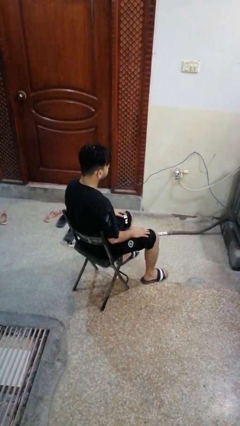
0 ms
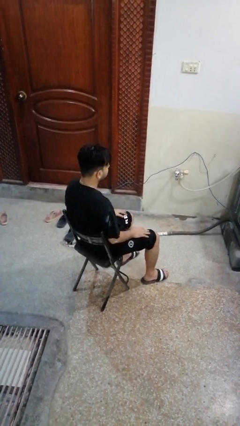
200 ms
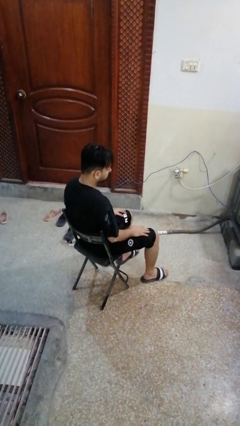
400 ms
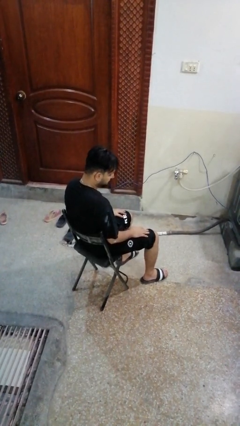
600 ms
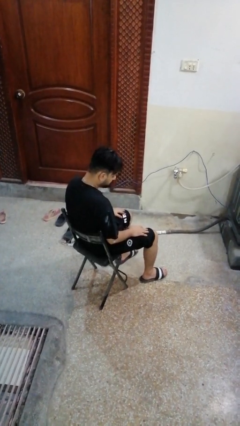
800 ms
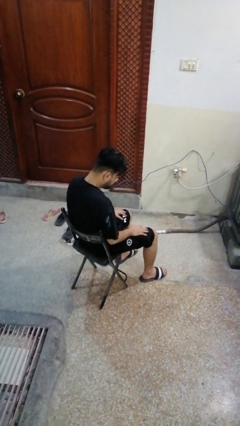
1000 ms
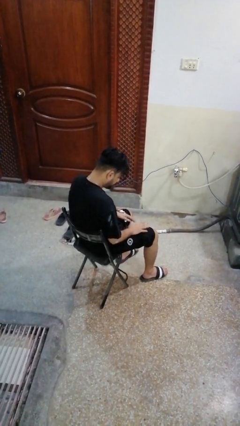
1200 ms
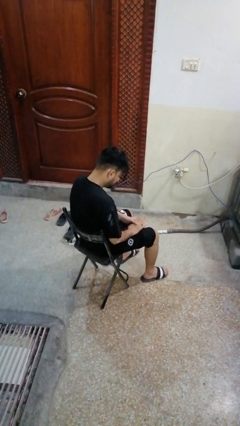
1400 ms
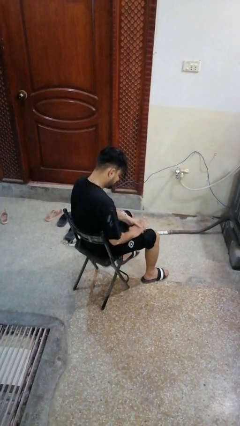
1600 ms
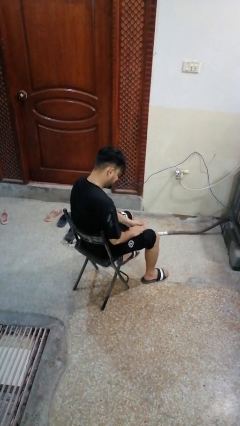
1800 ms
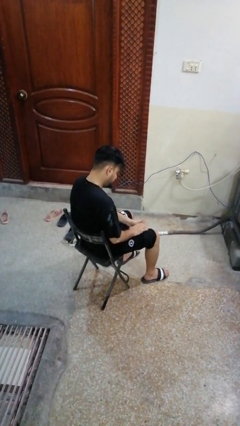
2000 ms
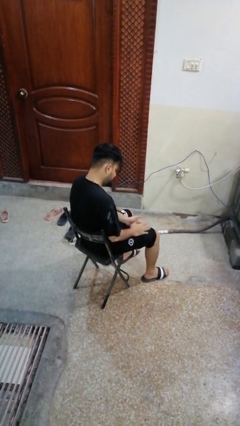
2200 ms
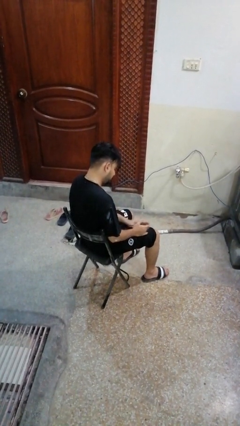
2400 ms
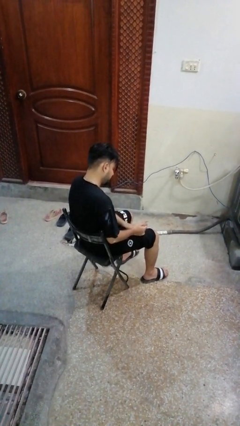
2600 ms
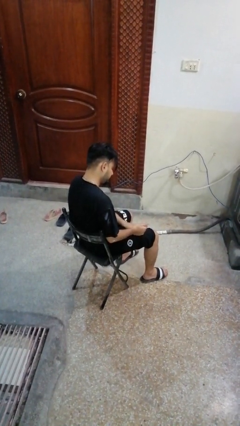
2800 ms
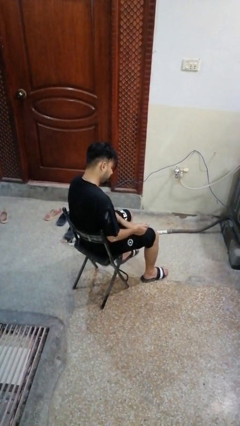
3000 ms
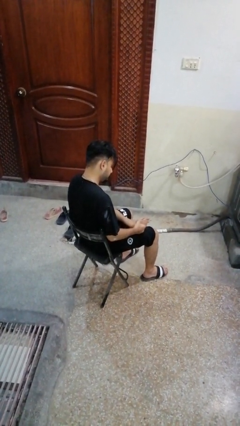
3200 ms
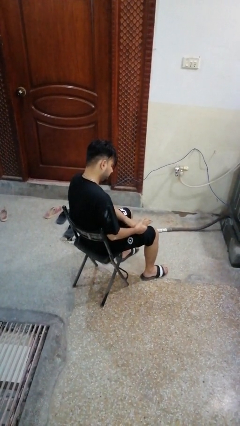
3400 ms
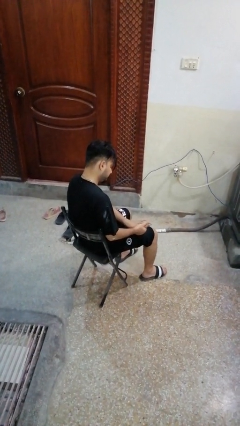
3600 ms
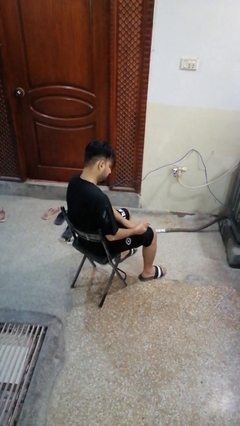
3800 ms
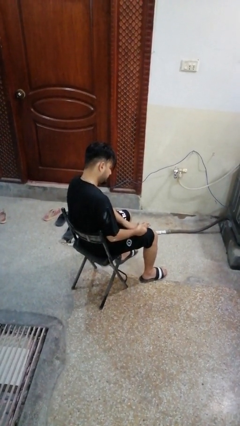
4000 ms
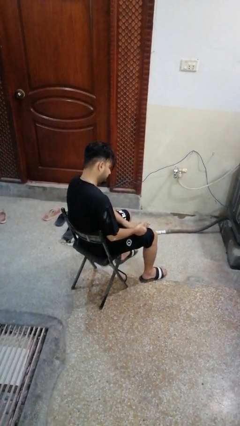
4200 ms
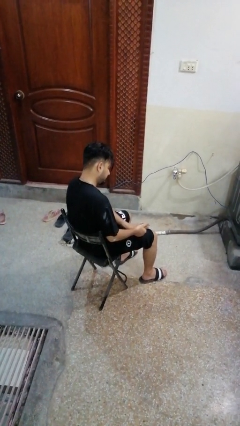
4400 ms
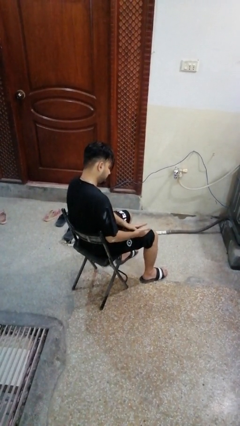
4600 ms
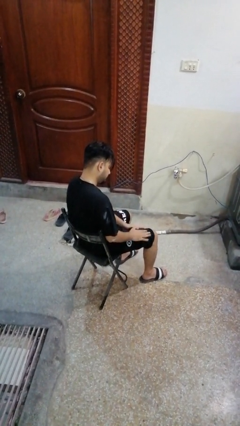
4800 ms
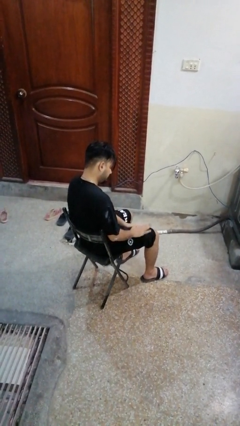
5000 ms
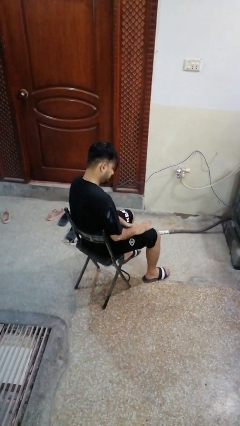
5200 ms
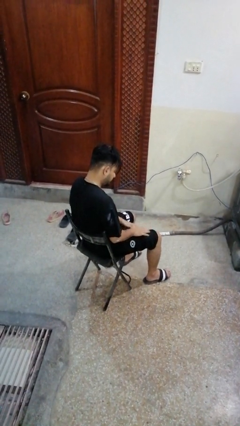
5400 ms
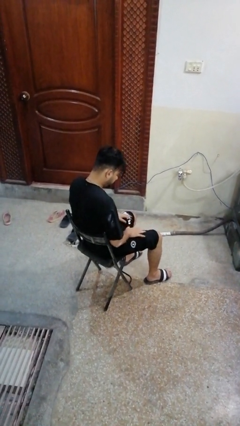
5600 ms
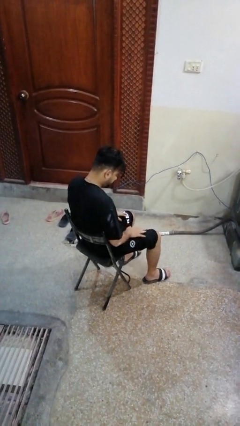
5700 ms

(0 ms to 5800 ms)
person looks at hands in lap

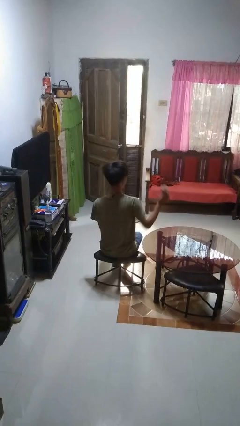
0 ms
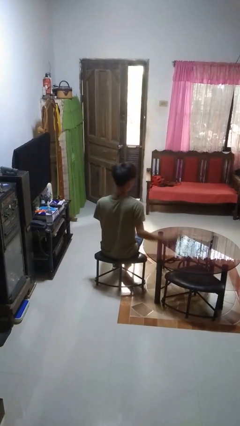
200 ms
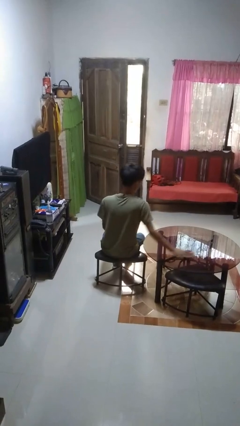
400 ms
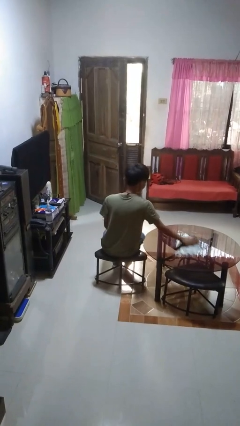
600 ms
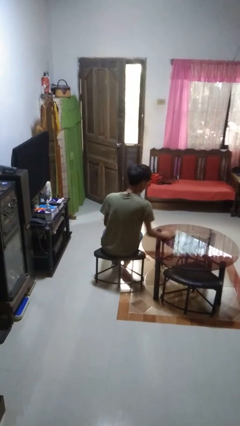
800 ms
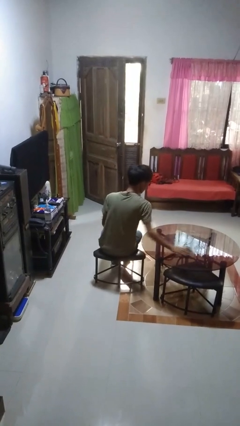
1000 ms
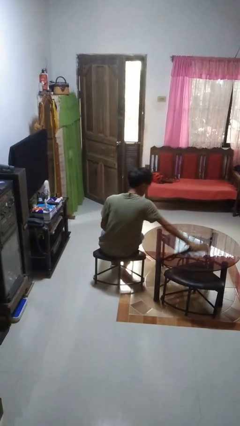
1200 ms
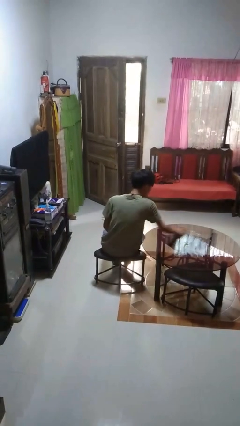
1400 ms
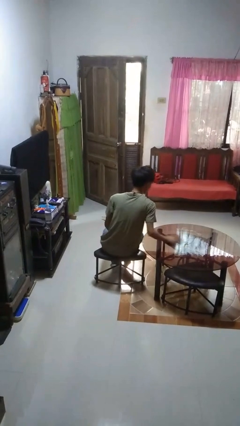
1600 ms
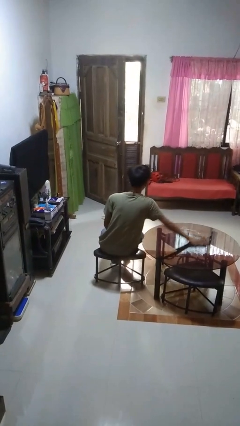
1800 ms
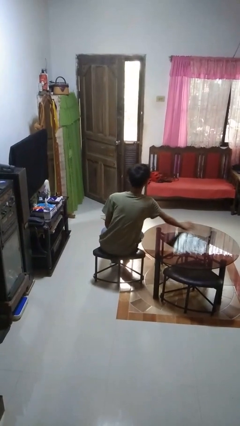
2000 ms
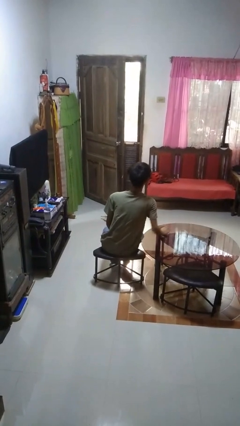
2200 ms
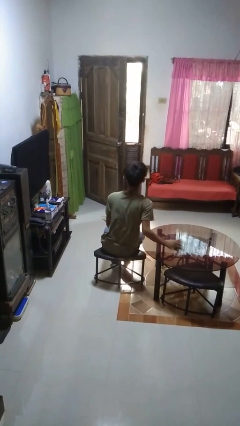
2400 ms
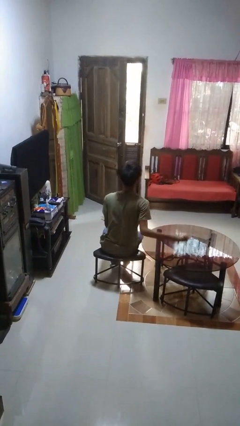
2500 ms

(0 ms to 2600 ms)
person cleans table with rag

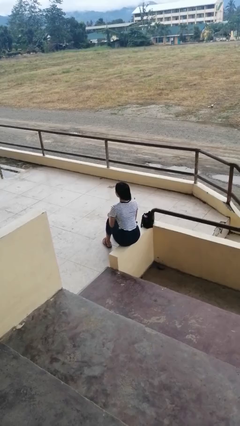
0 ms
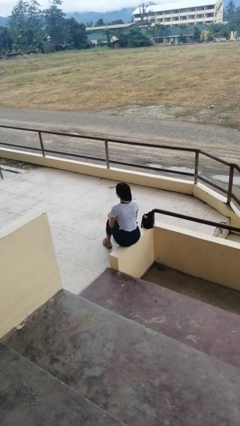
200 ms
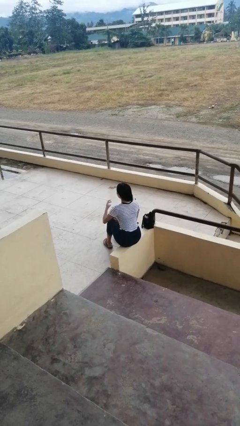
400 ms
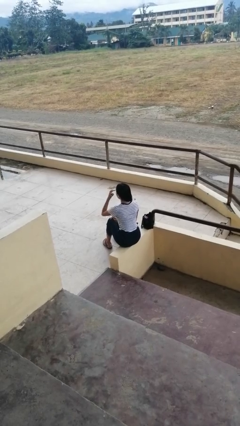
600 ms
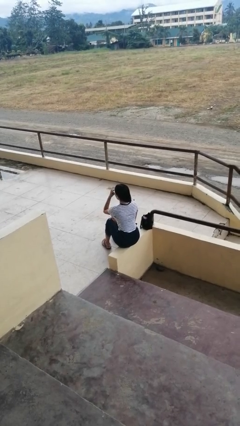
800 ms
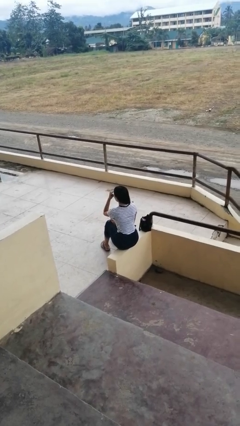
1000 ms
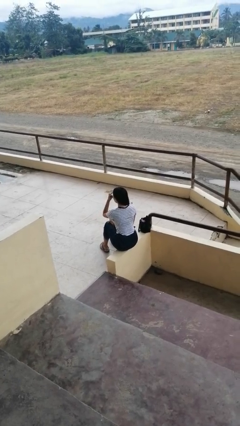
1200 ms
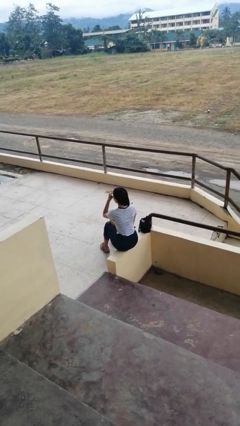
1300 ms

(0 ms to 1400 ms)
person gestures watch closely

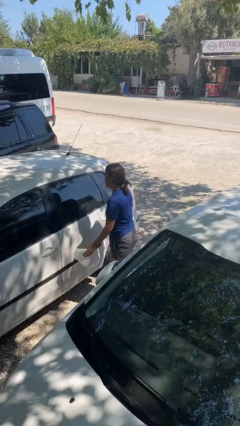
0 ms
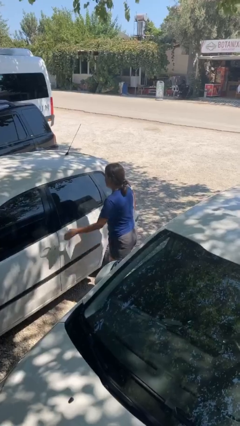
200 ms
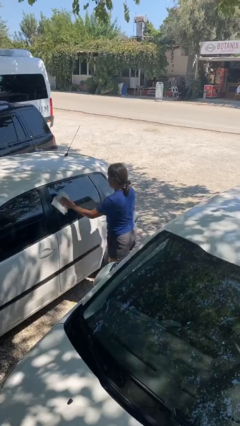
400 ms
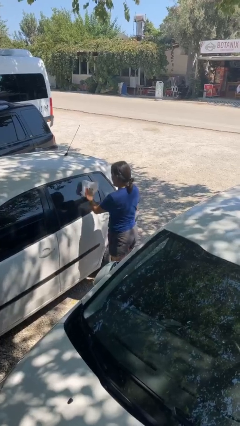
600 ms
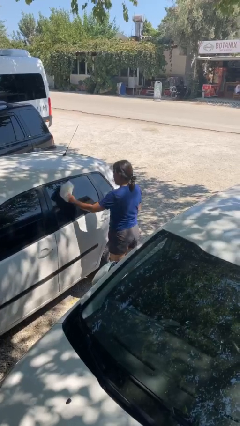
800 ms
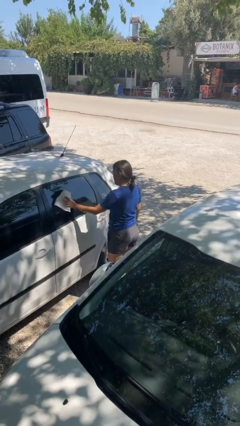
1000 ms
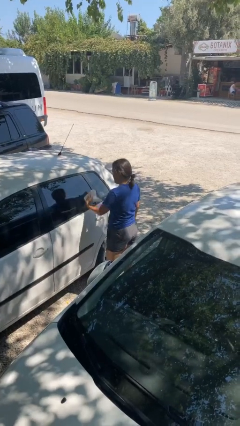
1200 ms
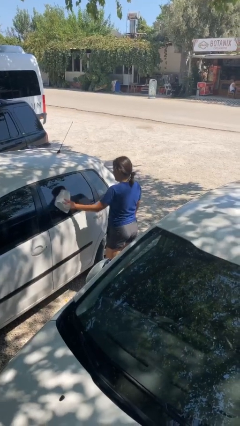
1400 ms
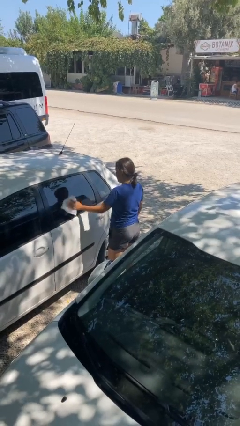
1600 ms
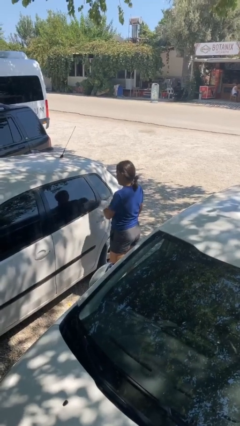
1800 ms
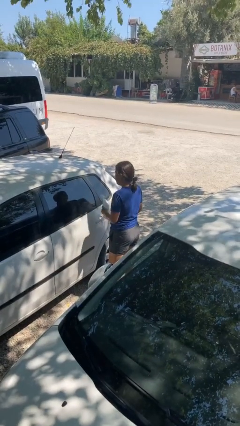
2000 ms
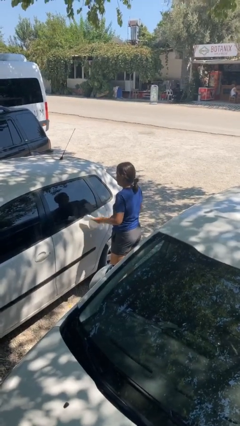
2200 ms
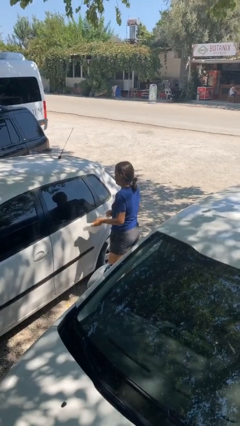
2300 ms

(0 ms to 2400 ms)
person polishes car with rag

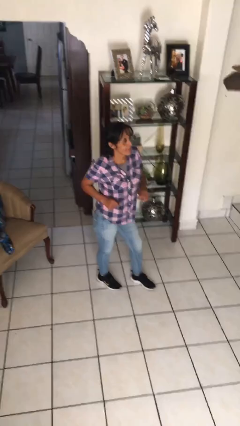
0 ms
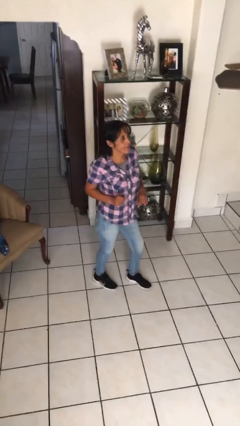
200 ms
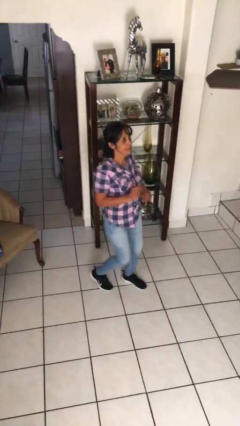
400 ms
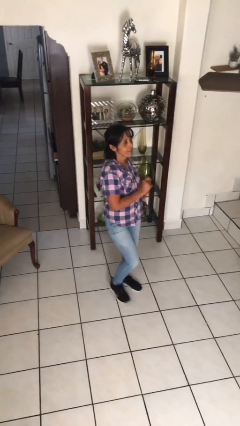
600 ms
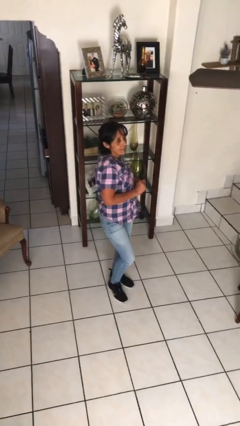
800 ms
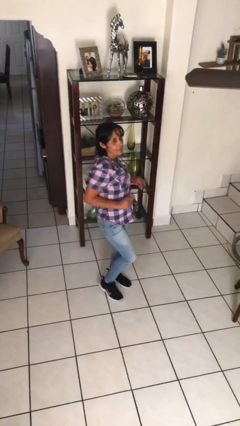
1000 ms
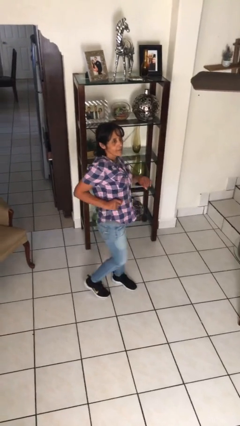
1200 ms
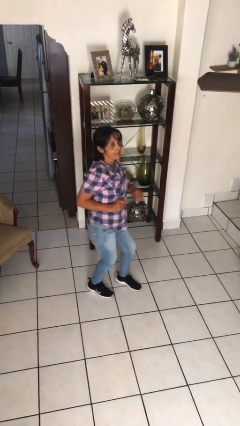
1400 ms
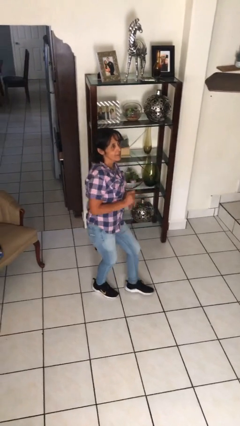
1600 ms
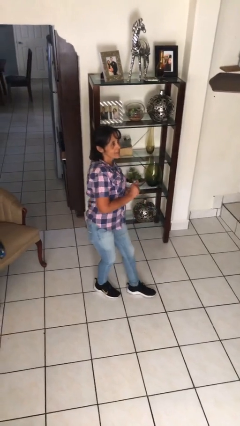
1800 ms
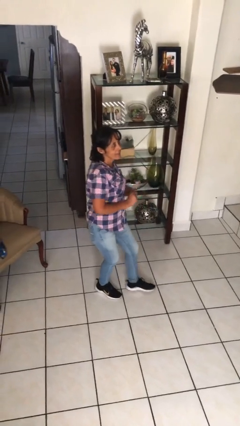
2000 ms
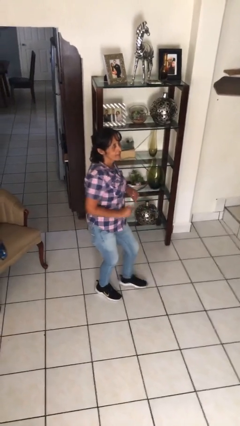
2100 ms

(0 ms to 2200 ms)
person dances in place

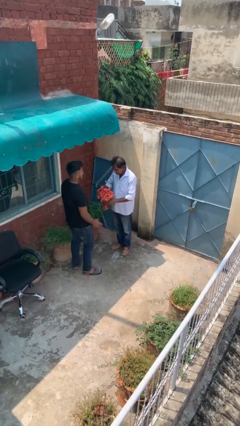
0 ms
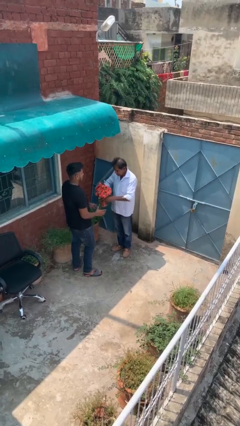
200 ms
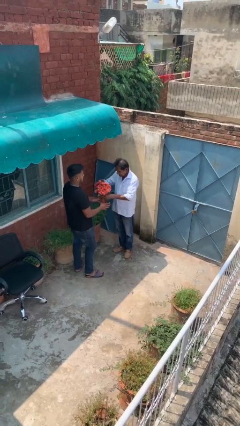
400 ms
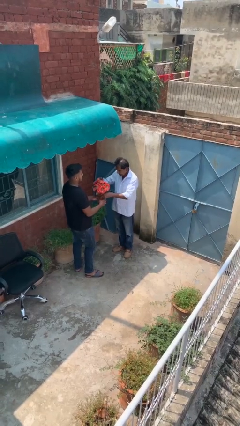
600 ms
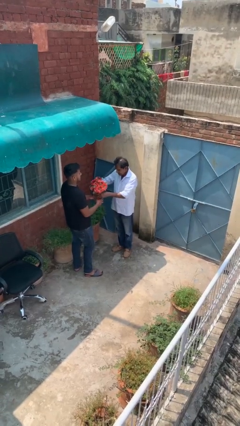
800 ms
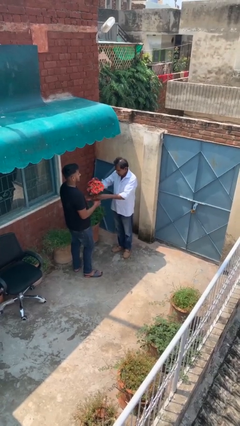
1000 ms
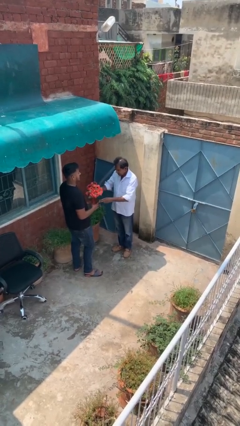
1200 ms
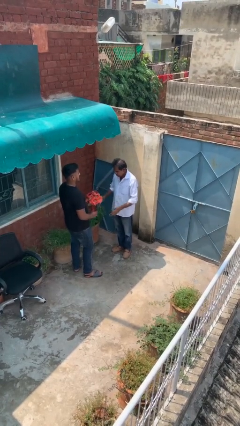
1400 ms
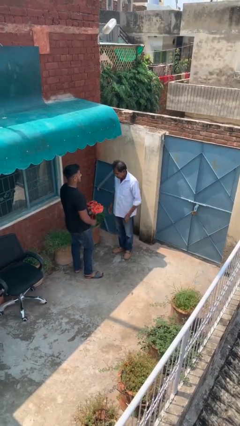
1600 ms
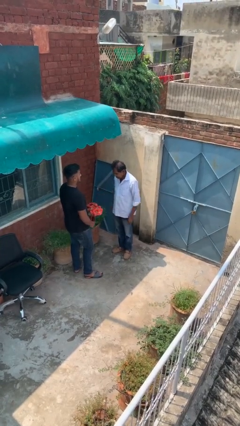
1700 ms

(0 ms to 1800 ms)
person transfers object to person

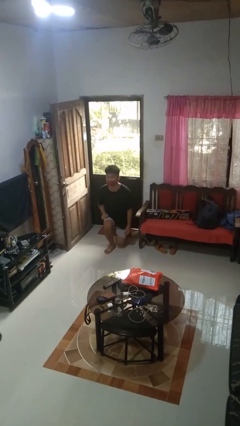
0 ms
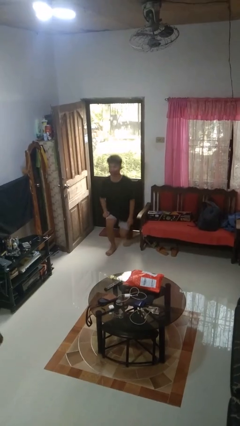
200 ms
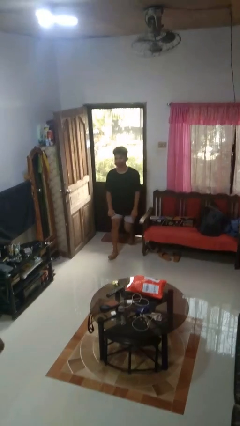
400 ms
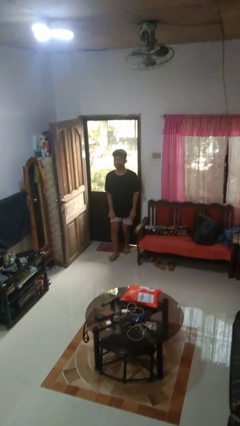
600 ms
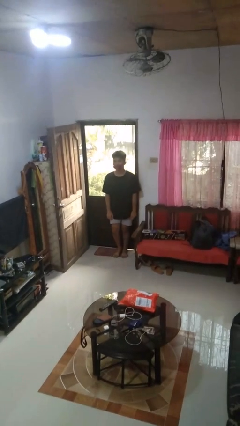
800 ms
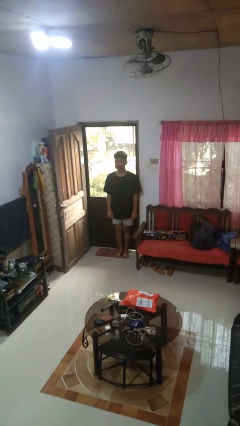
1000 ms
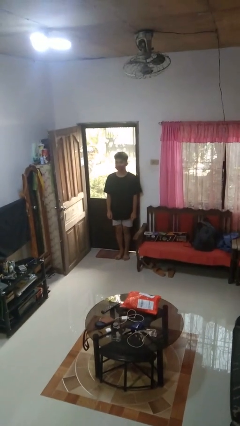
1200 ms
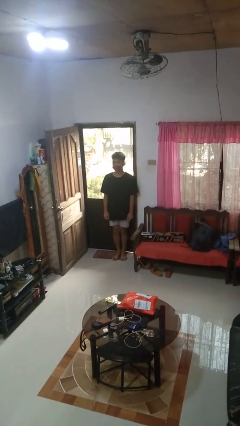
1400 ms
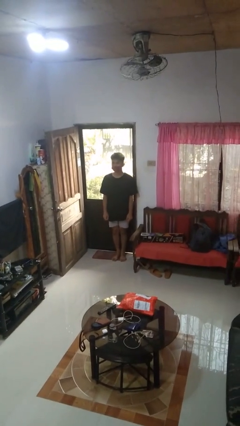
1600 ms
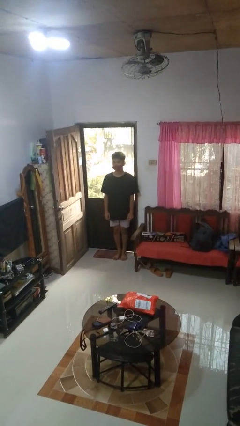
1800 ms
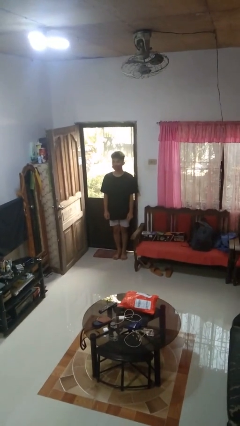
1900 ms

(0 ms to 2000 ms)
person stands up from floor
